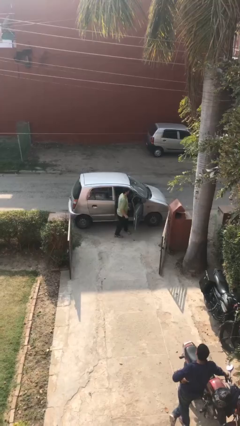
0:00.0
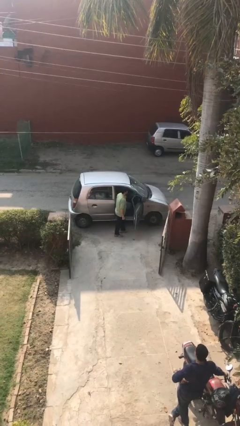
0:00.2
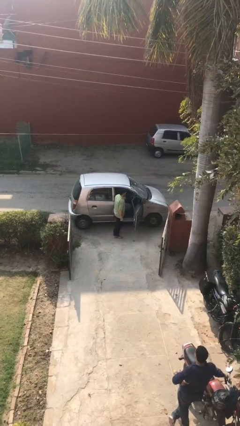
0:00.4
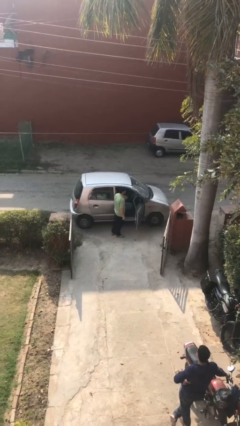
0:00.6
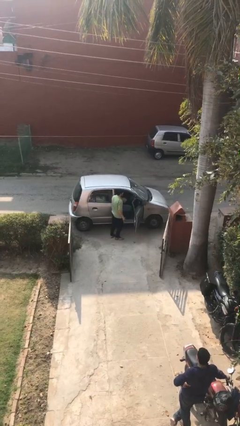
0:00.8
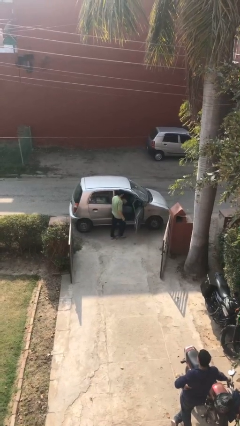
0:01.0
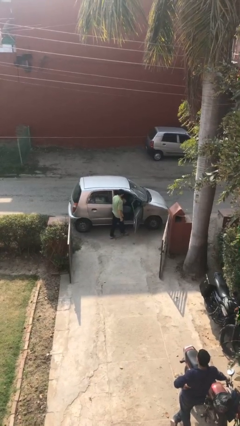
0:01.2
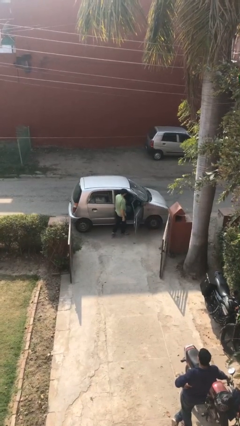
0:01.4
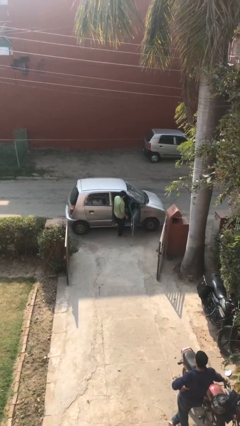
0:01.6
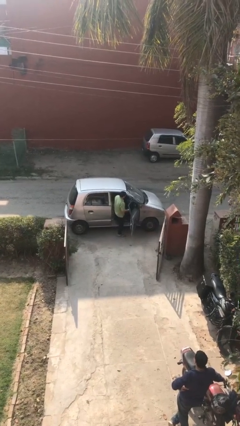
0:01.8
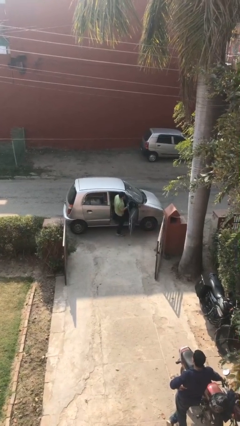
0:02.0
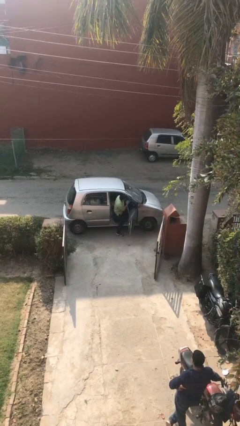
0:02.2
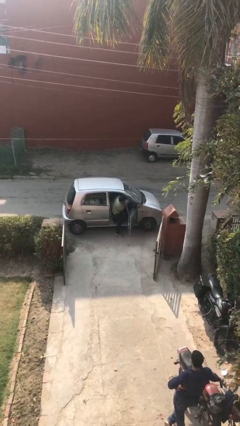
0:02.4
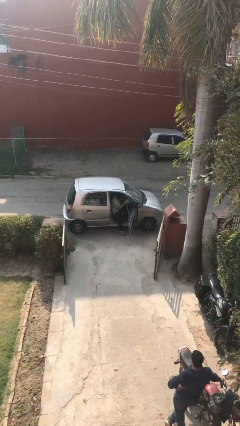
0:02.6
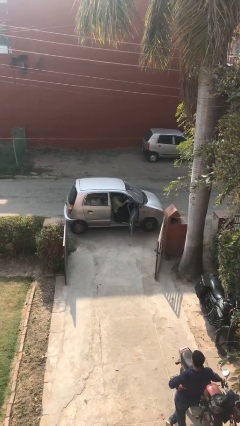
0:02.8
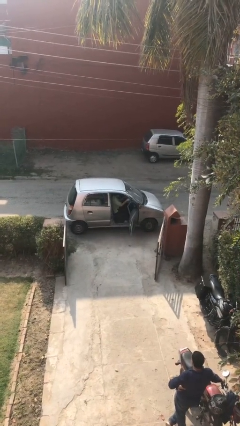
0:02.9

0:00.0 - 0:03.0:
person enters car

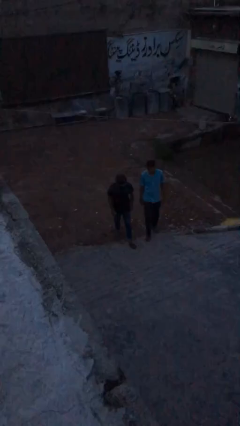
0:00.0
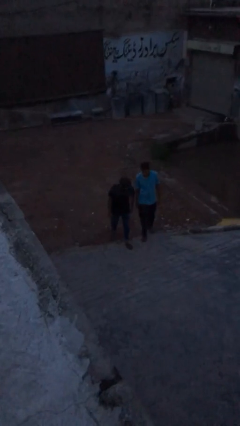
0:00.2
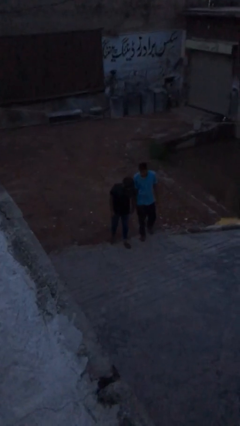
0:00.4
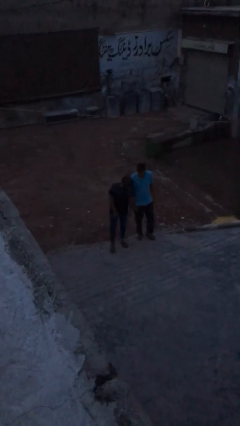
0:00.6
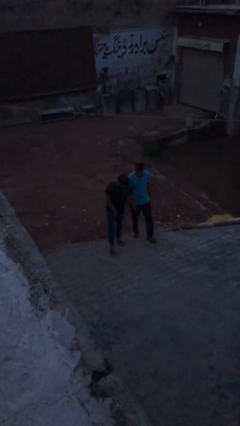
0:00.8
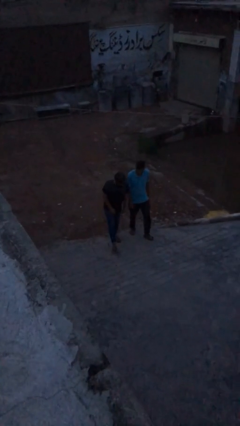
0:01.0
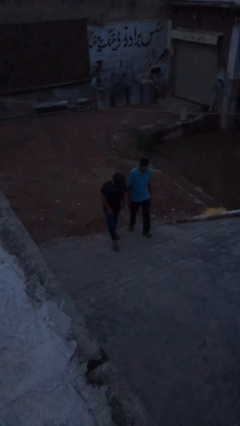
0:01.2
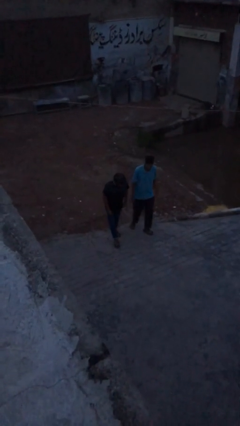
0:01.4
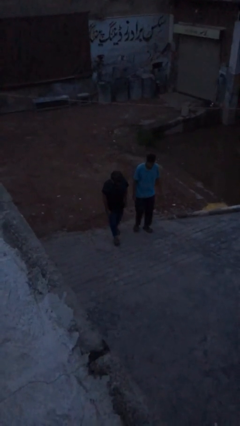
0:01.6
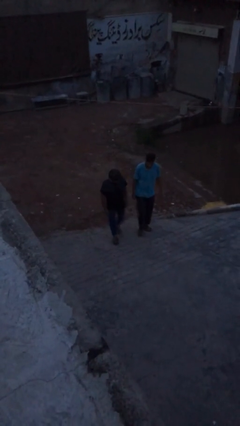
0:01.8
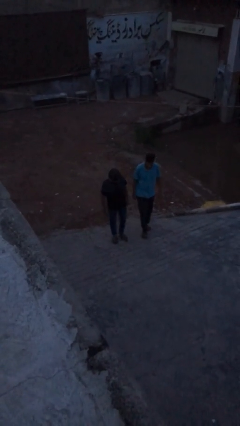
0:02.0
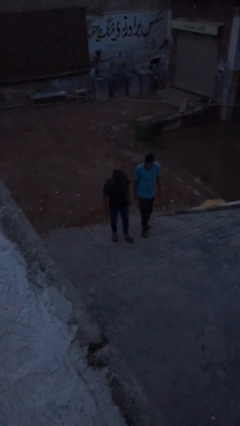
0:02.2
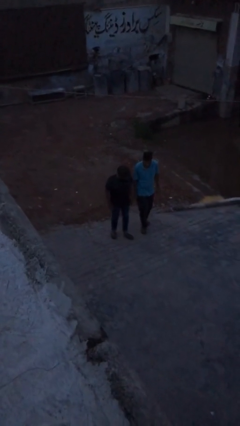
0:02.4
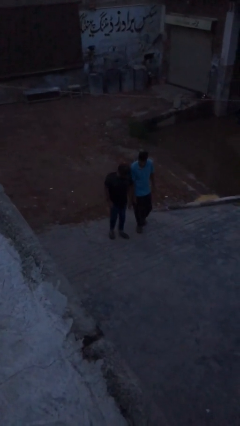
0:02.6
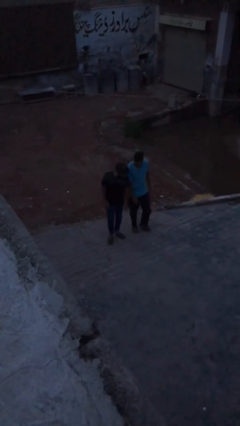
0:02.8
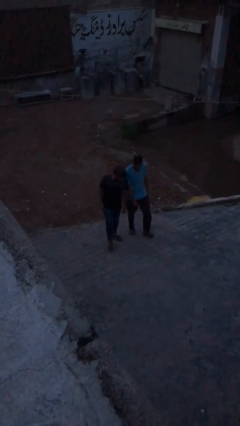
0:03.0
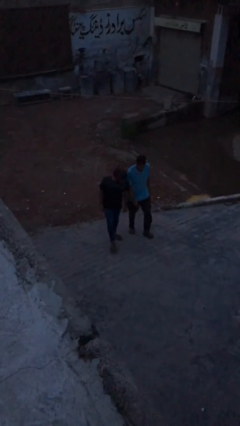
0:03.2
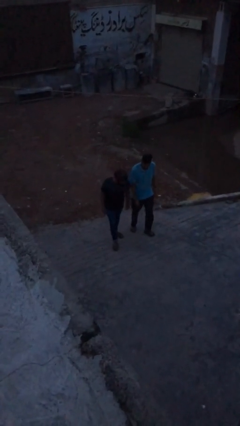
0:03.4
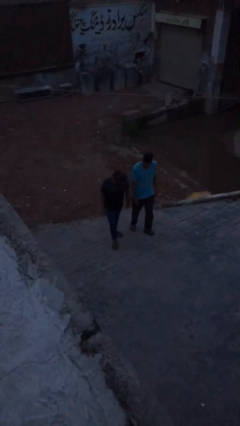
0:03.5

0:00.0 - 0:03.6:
person talks to person

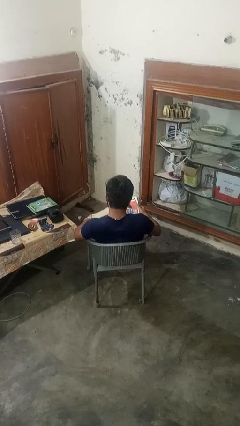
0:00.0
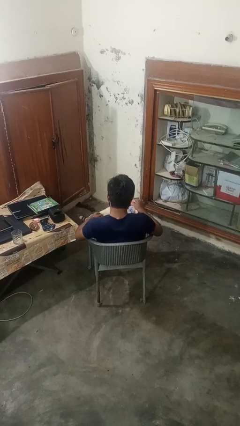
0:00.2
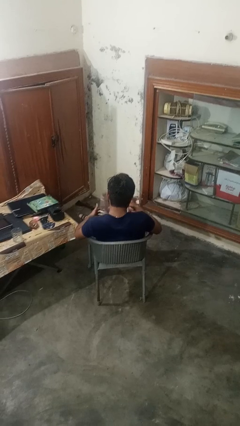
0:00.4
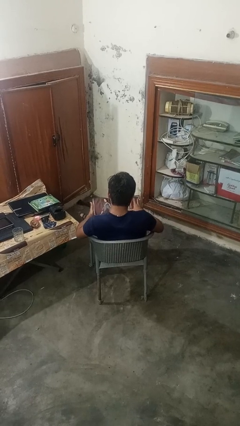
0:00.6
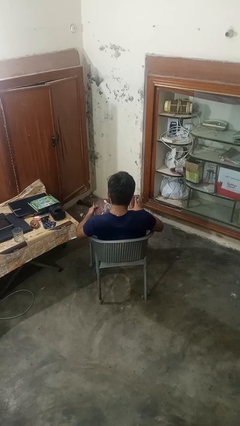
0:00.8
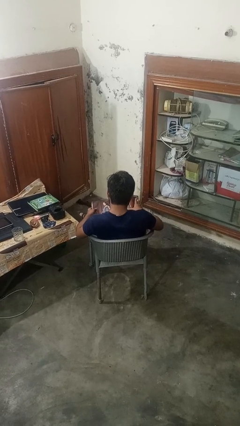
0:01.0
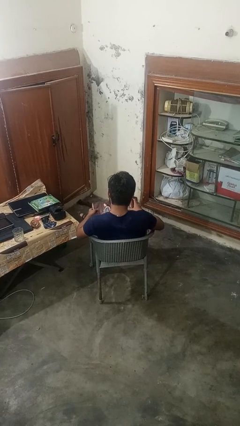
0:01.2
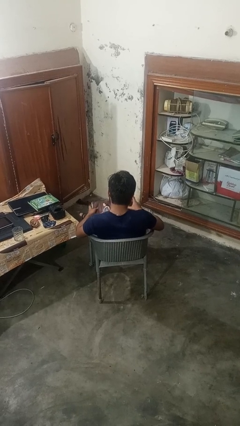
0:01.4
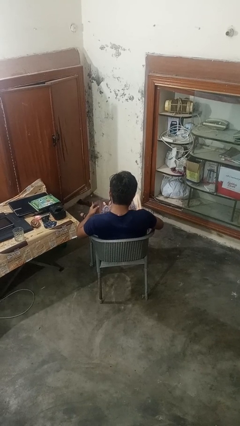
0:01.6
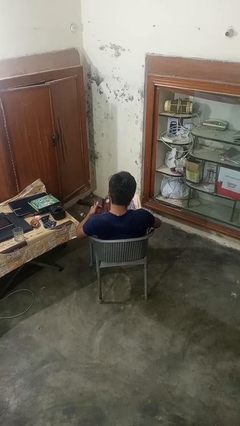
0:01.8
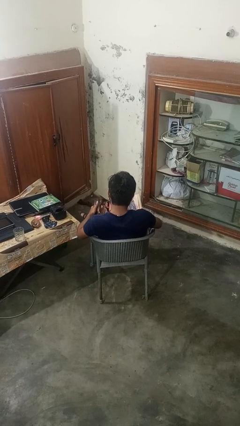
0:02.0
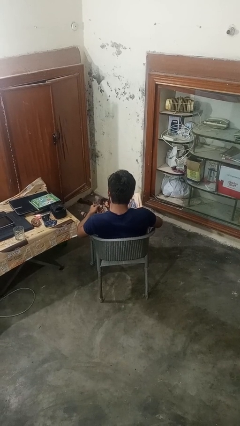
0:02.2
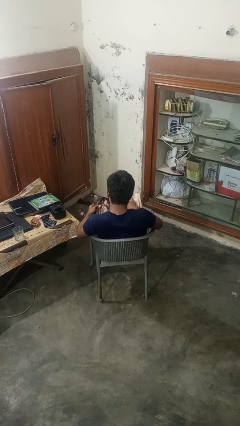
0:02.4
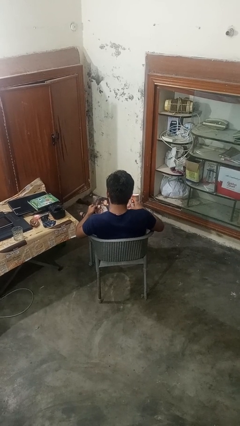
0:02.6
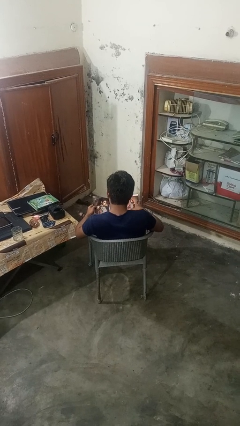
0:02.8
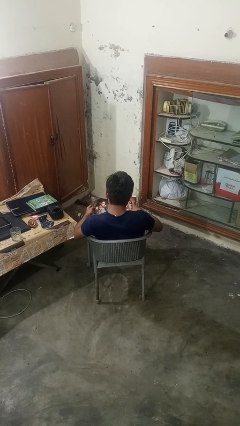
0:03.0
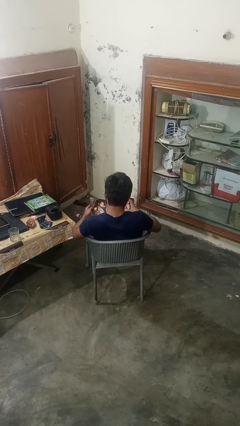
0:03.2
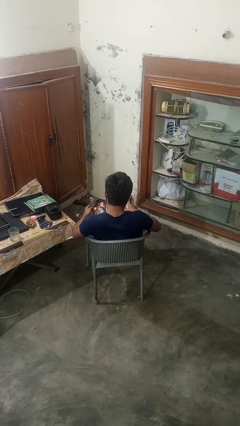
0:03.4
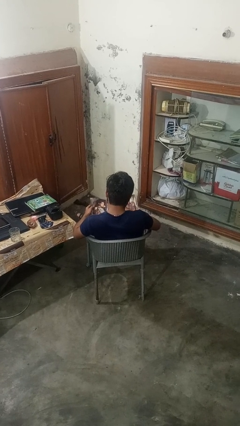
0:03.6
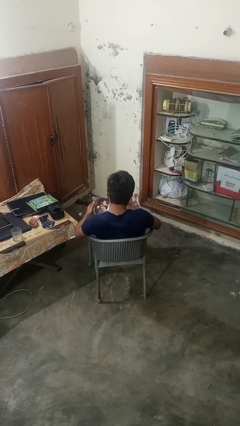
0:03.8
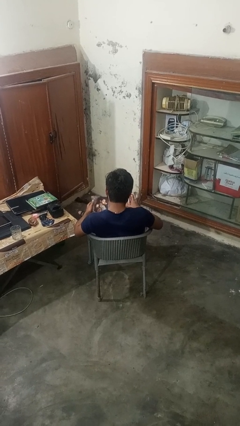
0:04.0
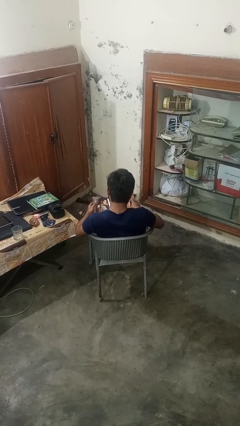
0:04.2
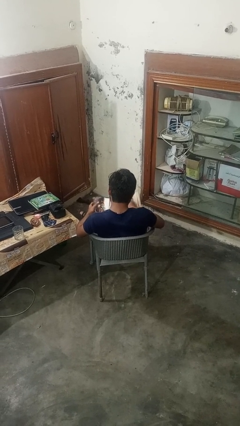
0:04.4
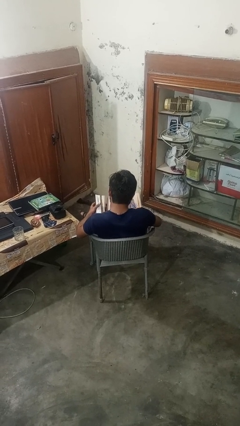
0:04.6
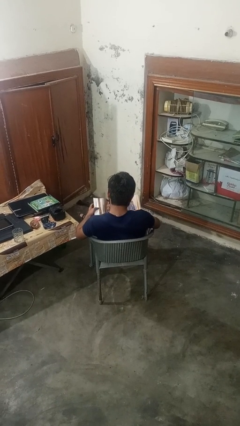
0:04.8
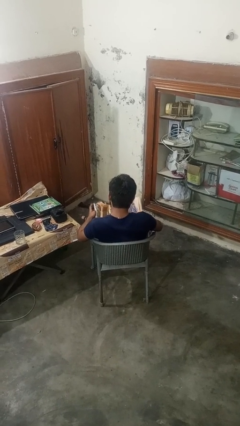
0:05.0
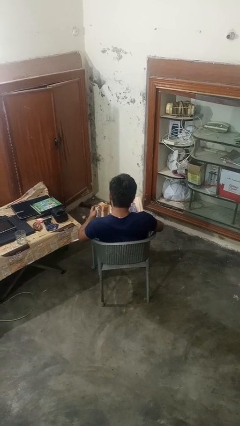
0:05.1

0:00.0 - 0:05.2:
person reads magazine

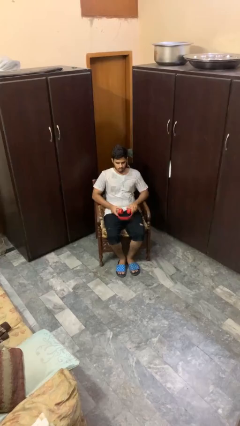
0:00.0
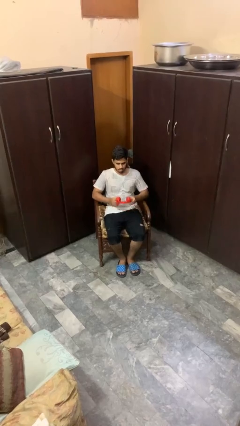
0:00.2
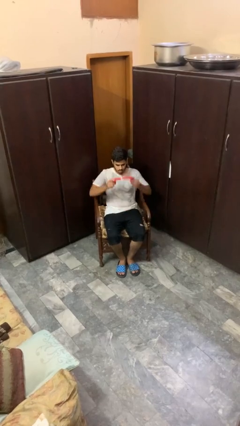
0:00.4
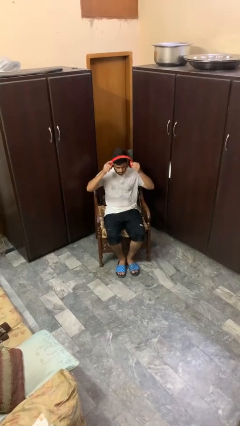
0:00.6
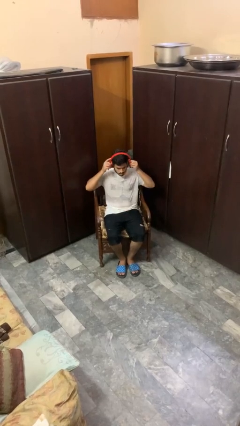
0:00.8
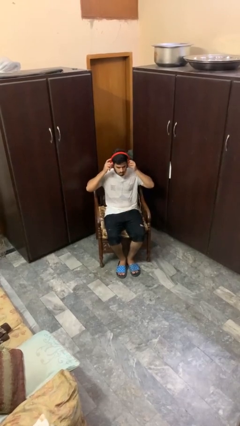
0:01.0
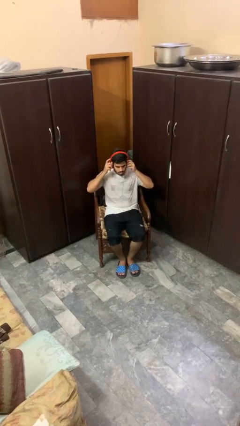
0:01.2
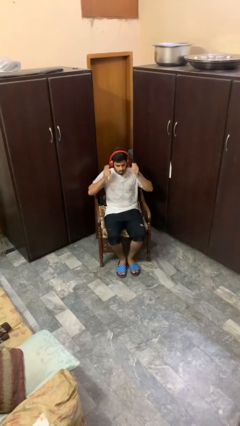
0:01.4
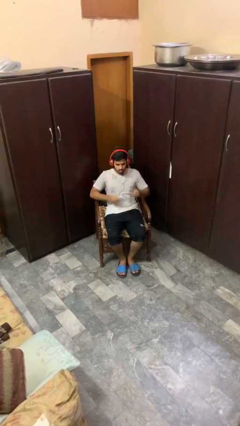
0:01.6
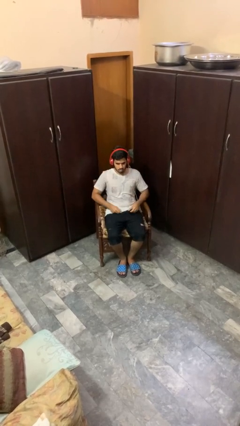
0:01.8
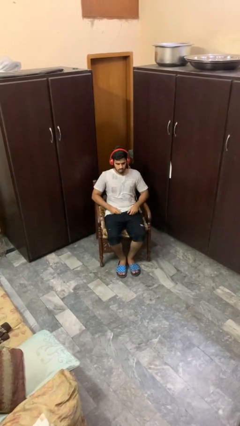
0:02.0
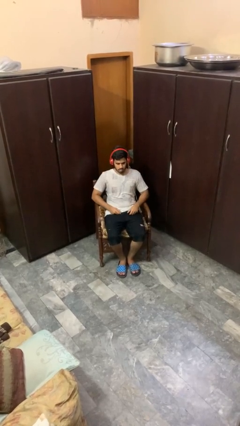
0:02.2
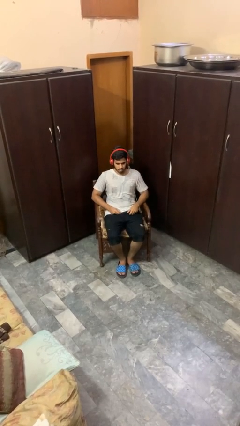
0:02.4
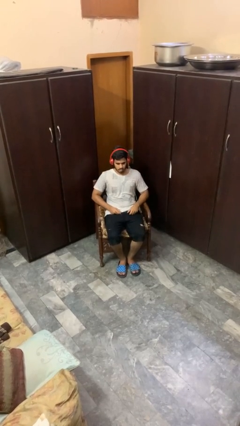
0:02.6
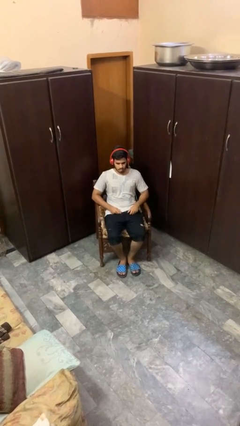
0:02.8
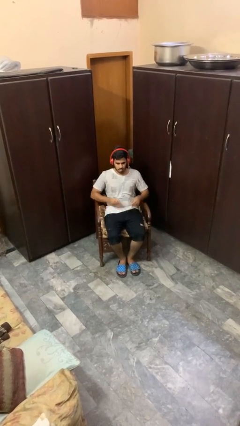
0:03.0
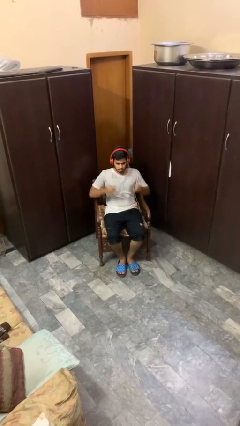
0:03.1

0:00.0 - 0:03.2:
person puts on headphones

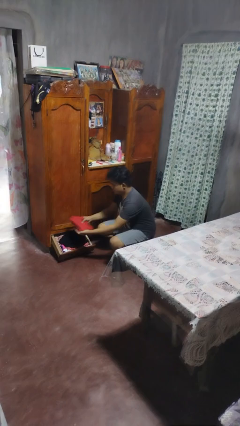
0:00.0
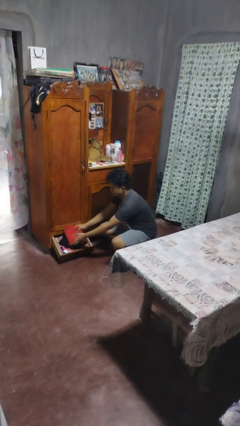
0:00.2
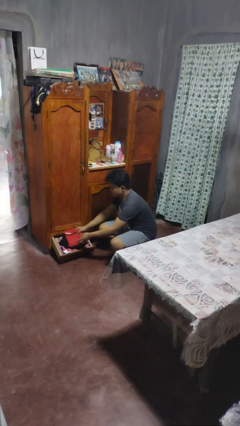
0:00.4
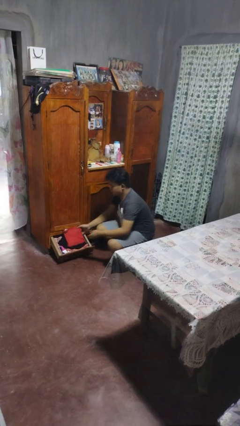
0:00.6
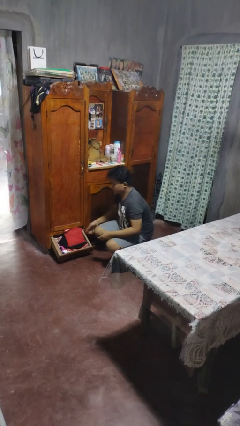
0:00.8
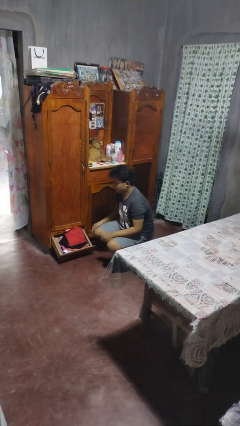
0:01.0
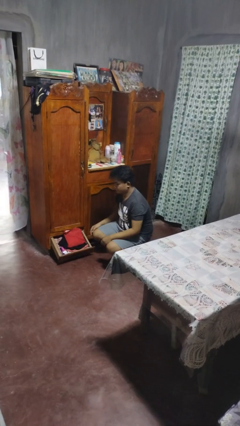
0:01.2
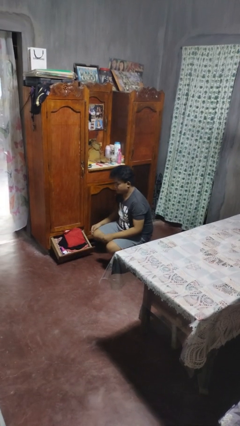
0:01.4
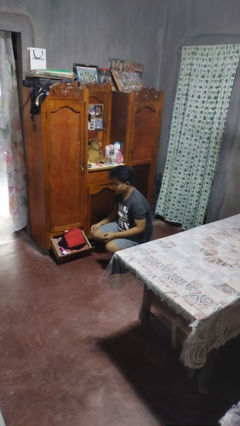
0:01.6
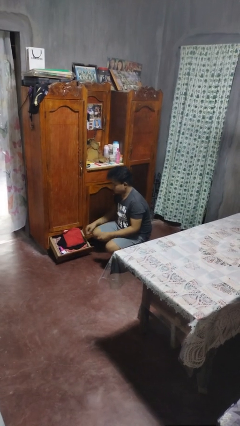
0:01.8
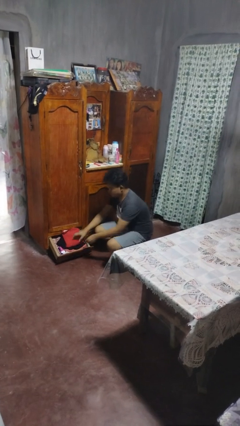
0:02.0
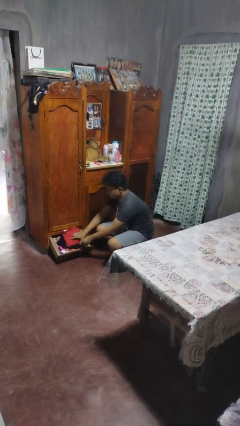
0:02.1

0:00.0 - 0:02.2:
person puts clothes into dresser
